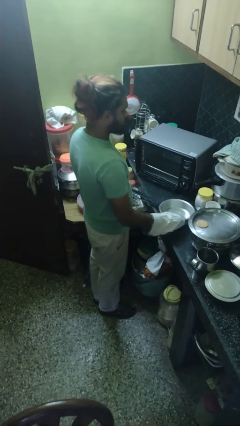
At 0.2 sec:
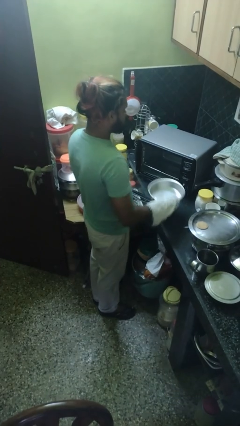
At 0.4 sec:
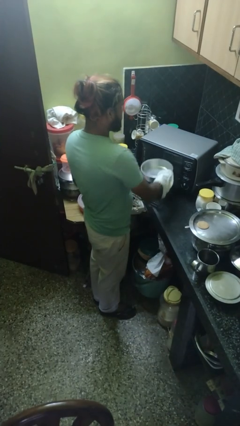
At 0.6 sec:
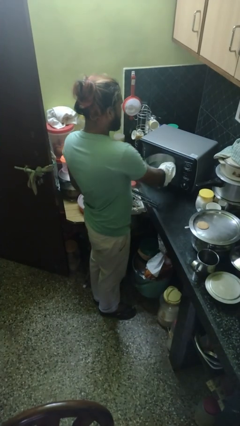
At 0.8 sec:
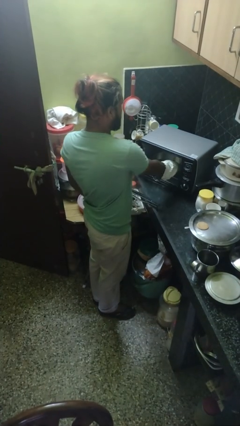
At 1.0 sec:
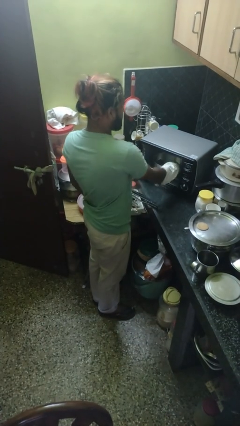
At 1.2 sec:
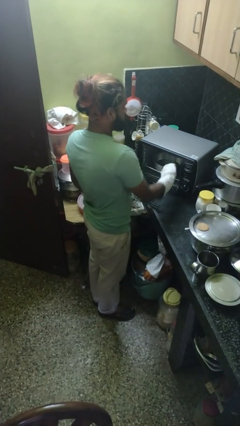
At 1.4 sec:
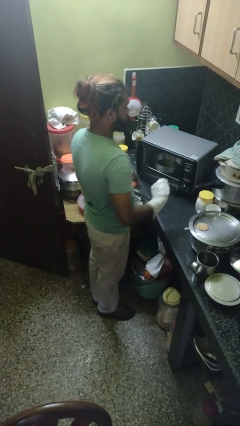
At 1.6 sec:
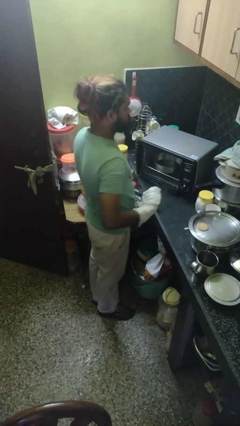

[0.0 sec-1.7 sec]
person puts object into oven

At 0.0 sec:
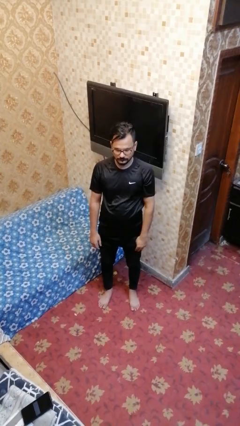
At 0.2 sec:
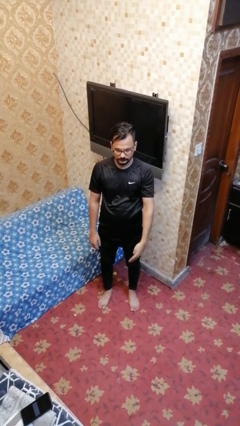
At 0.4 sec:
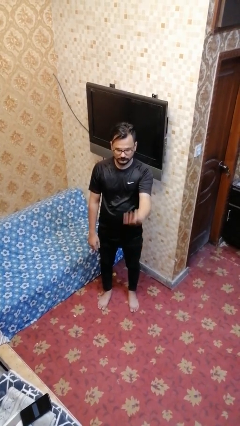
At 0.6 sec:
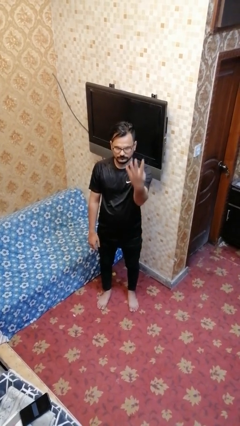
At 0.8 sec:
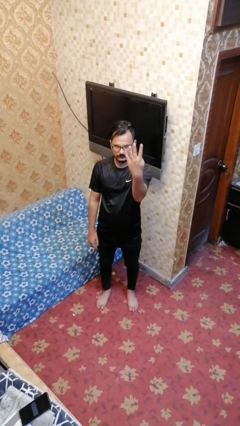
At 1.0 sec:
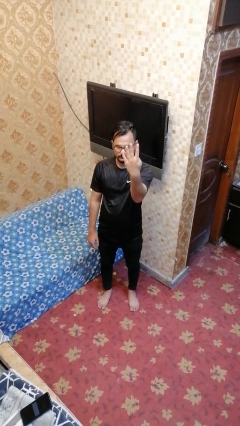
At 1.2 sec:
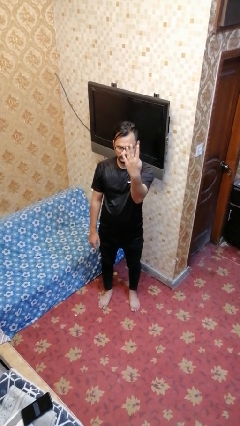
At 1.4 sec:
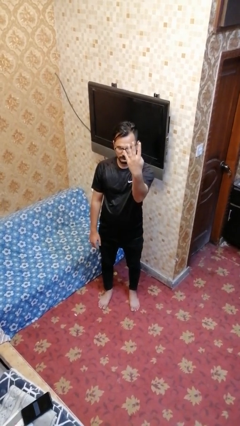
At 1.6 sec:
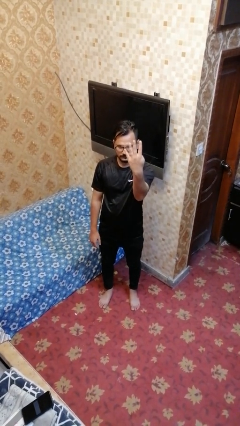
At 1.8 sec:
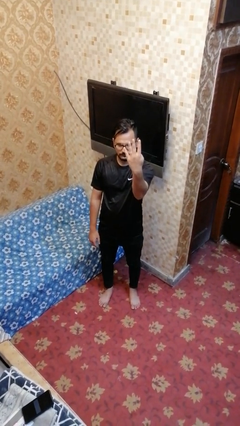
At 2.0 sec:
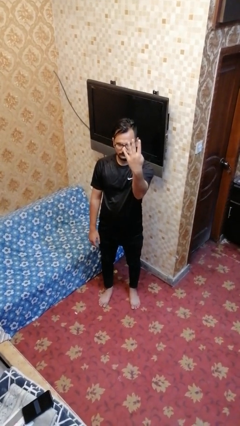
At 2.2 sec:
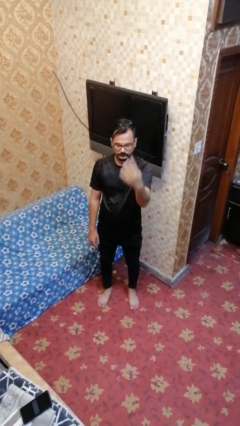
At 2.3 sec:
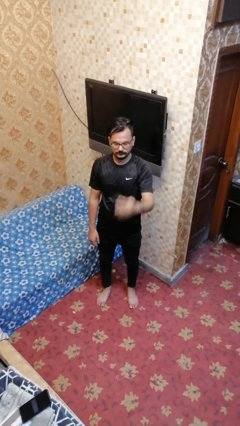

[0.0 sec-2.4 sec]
person gestures number four

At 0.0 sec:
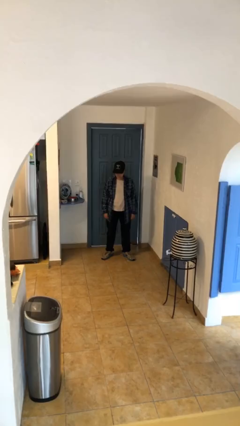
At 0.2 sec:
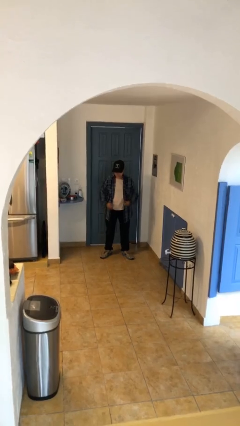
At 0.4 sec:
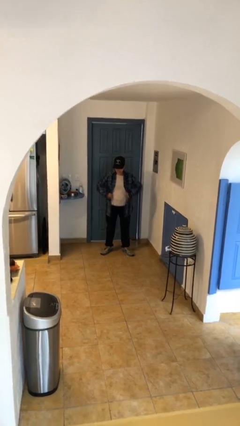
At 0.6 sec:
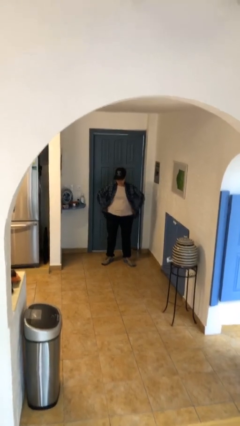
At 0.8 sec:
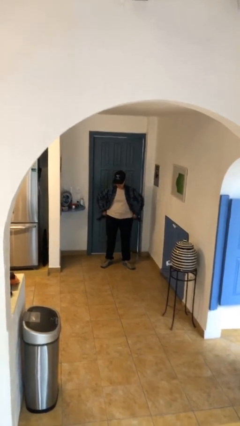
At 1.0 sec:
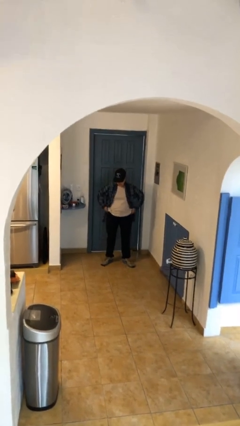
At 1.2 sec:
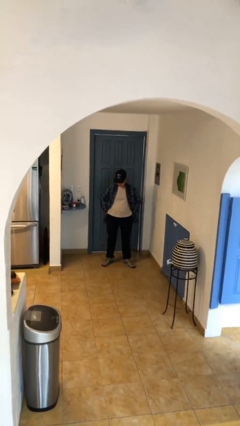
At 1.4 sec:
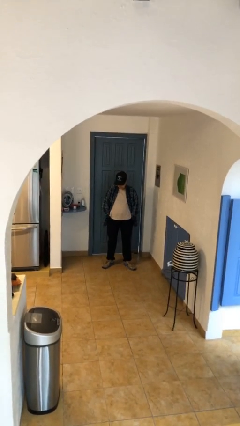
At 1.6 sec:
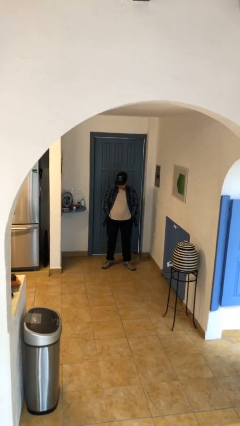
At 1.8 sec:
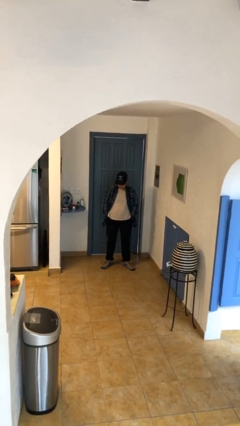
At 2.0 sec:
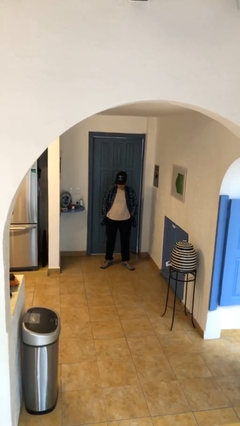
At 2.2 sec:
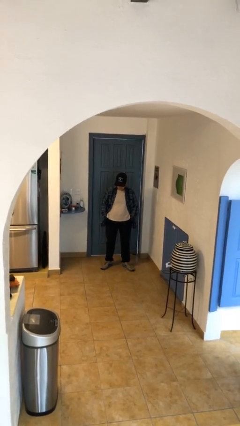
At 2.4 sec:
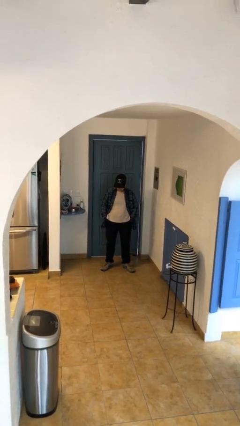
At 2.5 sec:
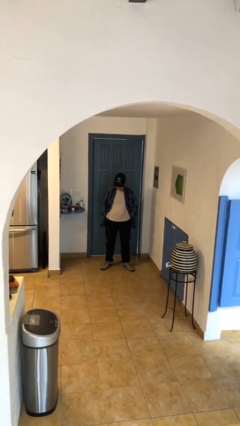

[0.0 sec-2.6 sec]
person puts hands in back pockets

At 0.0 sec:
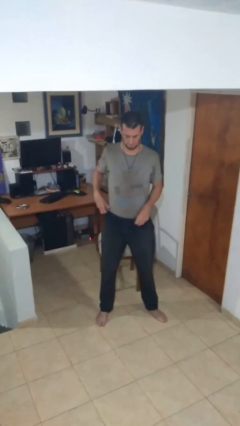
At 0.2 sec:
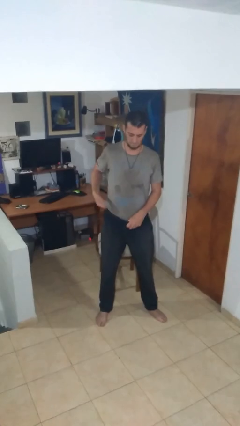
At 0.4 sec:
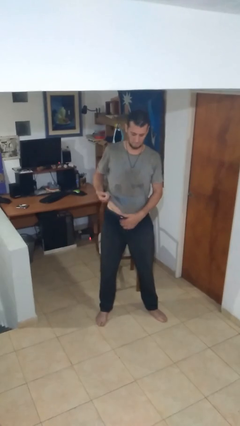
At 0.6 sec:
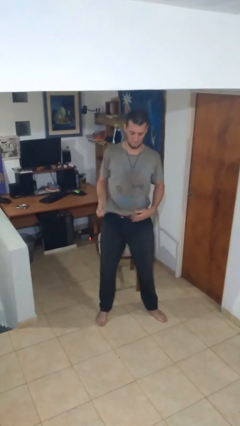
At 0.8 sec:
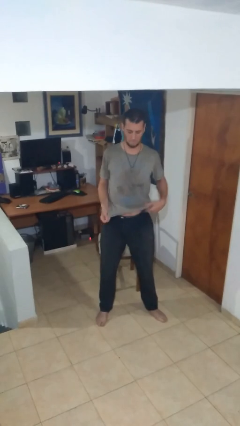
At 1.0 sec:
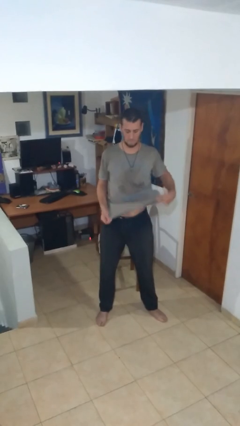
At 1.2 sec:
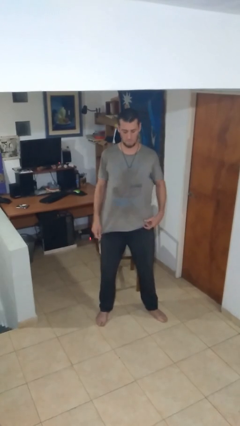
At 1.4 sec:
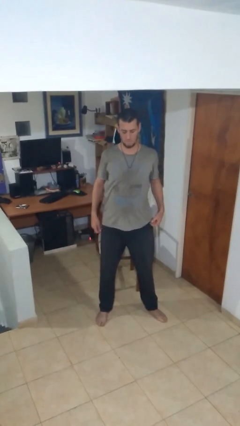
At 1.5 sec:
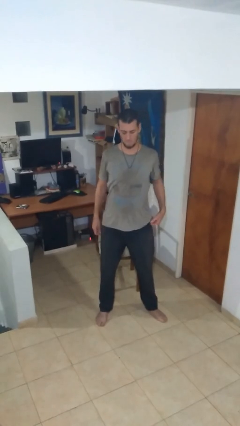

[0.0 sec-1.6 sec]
person untucks shirt

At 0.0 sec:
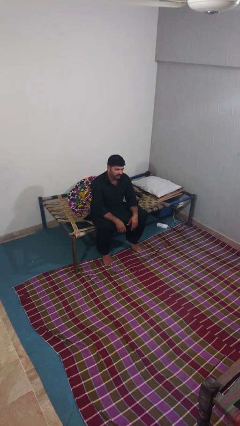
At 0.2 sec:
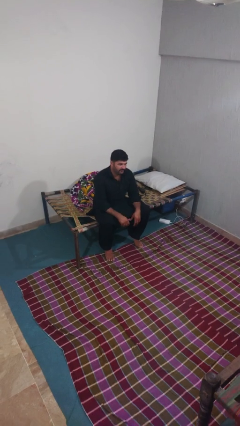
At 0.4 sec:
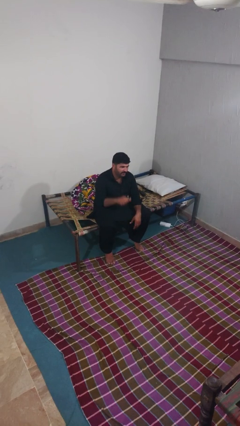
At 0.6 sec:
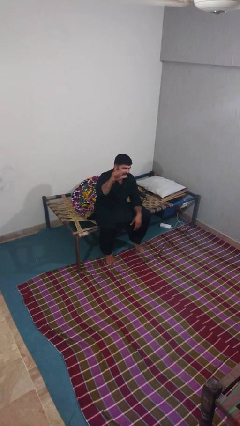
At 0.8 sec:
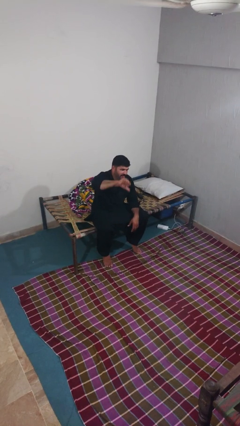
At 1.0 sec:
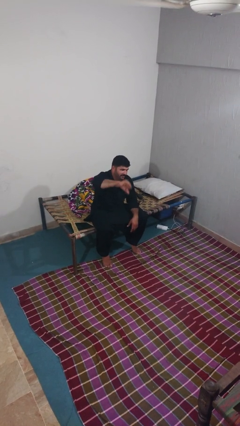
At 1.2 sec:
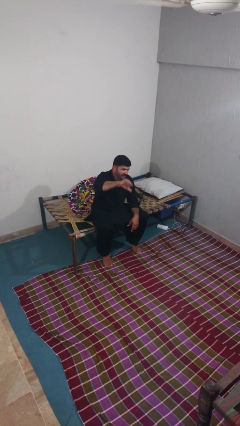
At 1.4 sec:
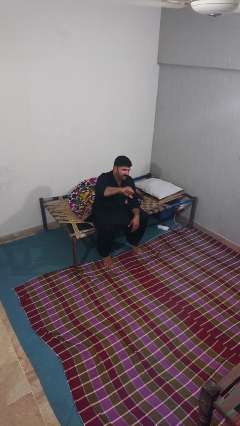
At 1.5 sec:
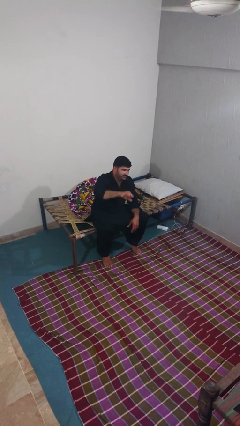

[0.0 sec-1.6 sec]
person gestures thumbs down

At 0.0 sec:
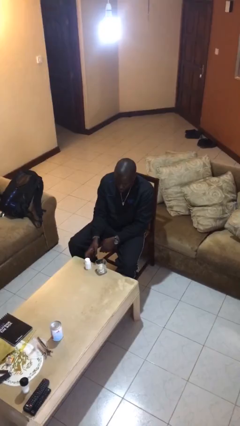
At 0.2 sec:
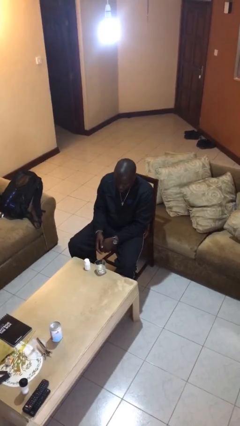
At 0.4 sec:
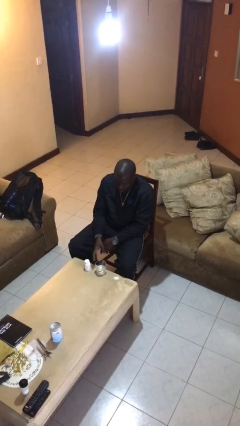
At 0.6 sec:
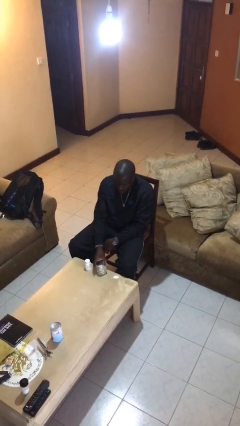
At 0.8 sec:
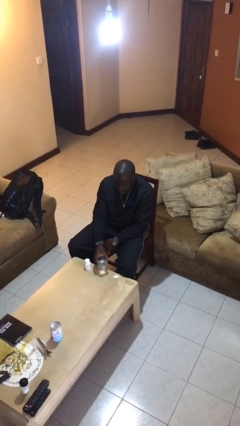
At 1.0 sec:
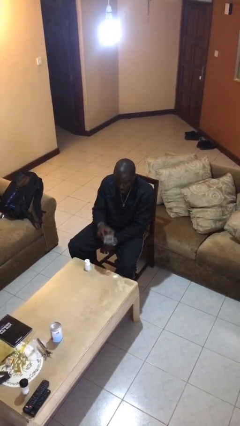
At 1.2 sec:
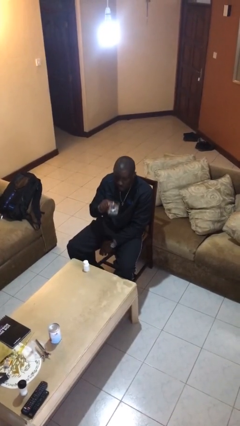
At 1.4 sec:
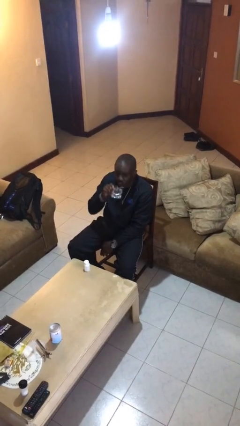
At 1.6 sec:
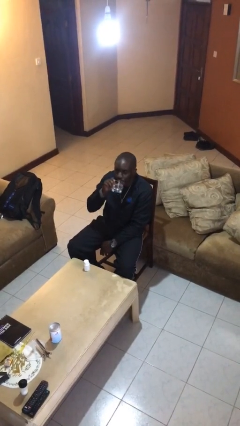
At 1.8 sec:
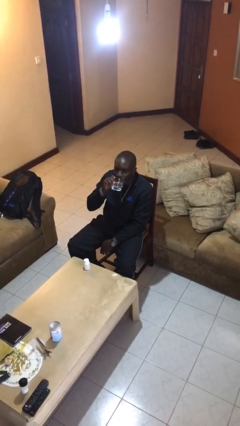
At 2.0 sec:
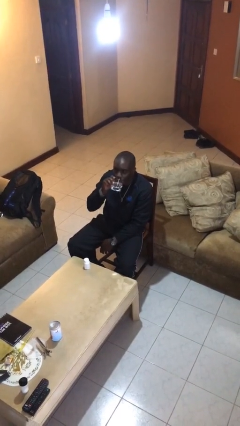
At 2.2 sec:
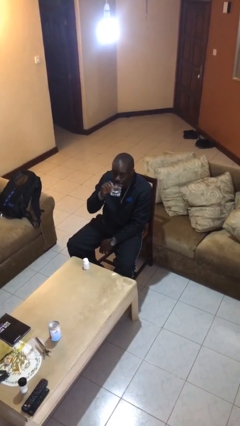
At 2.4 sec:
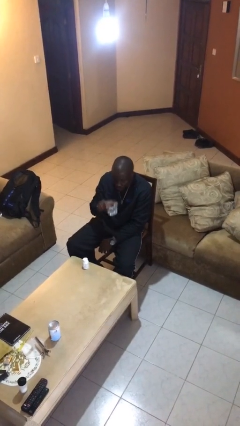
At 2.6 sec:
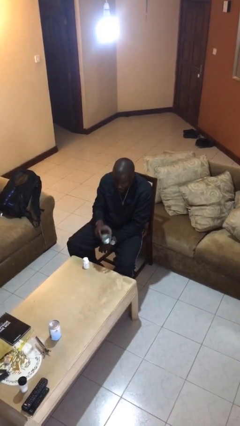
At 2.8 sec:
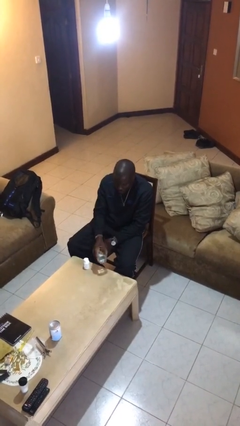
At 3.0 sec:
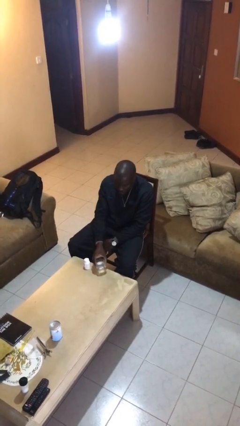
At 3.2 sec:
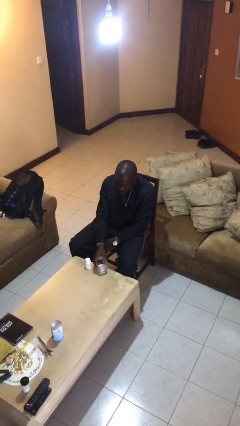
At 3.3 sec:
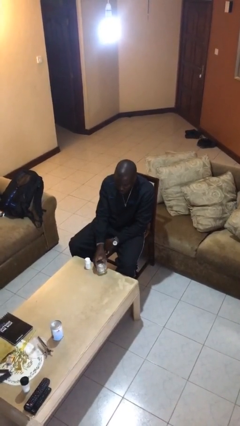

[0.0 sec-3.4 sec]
person drinks from cup

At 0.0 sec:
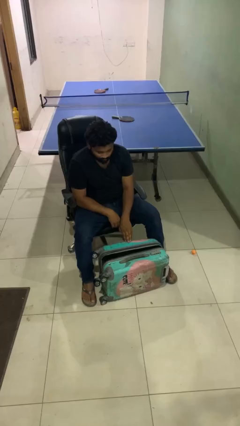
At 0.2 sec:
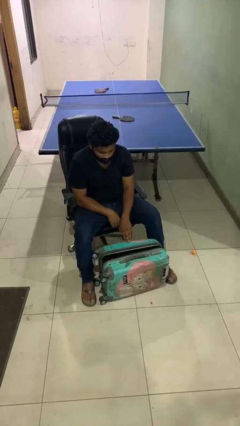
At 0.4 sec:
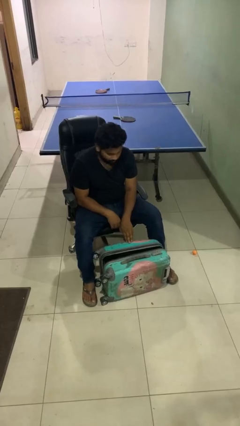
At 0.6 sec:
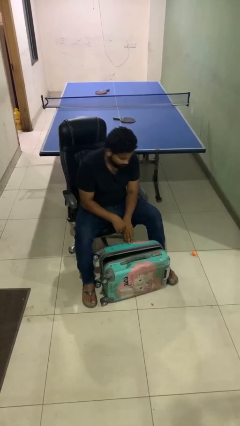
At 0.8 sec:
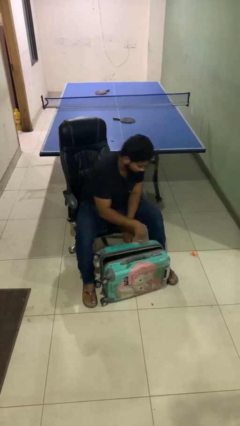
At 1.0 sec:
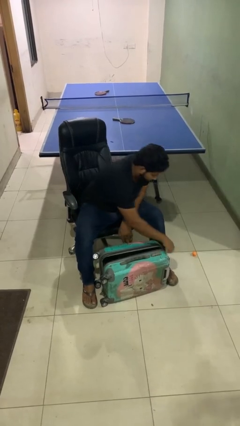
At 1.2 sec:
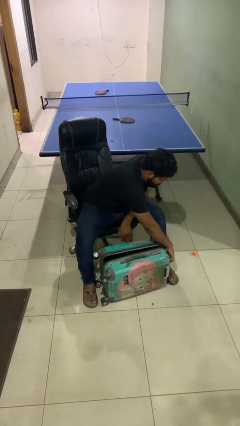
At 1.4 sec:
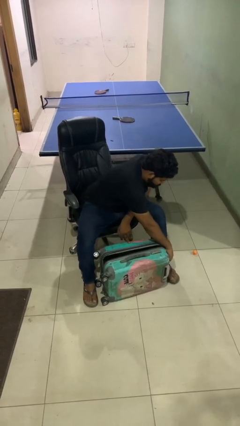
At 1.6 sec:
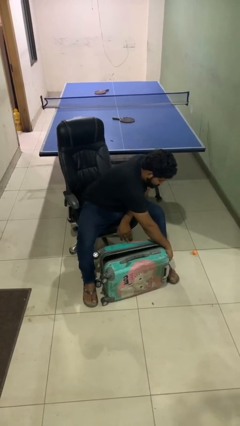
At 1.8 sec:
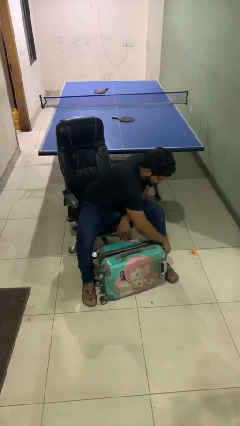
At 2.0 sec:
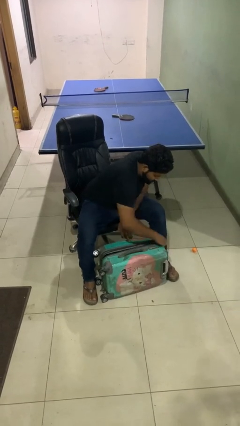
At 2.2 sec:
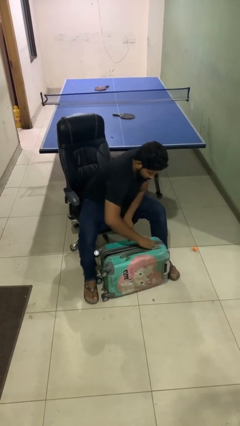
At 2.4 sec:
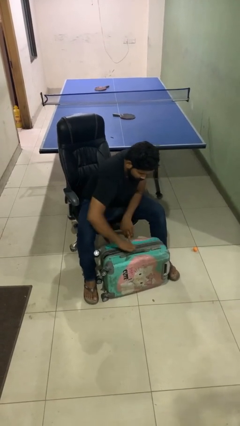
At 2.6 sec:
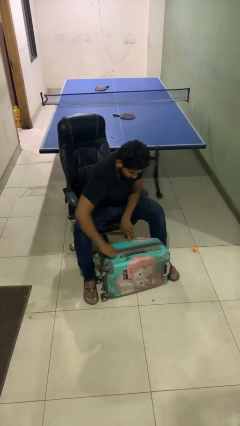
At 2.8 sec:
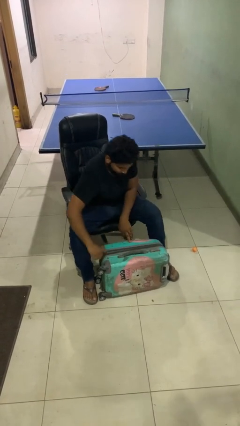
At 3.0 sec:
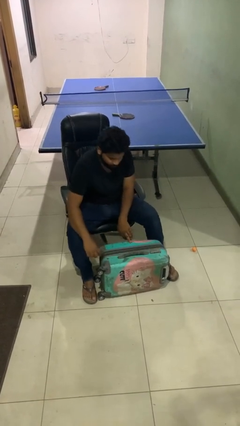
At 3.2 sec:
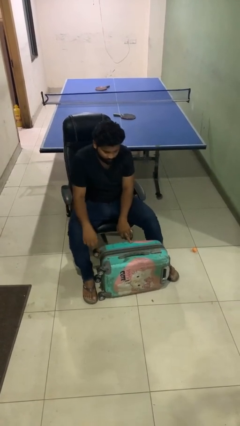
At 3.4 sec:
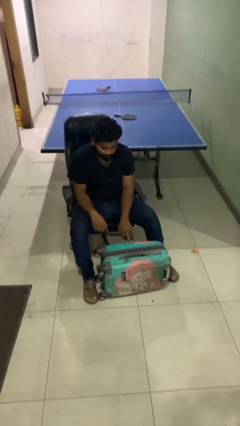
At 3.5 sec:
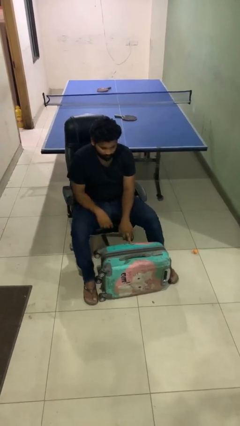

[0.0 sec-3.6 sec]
person closes suitcase
